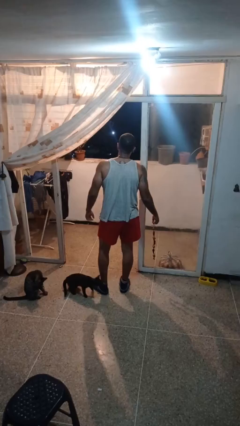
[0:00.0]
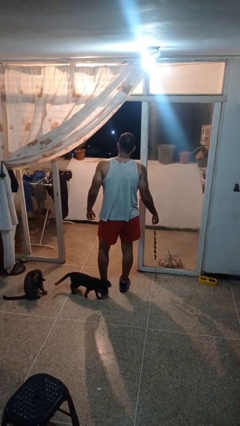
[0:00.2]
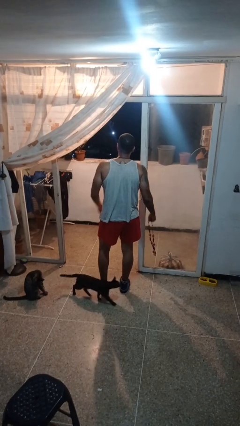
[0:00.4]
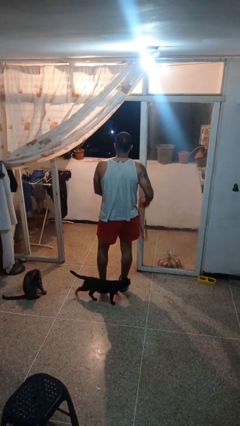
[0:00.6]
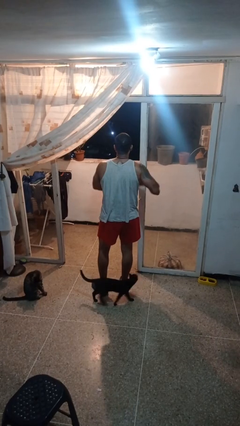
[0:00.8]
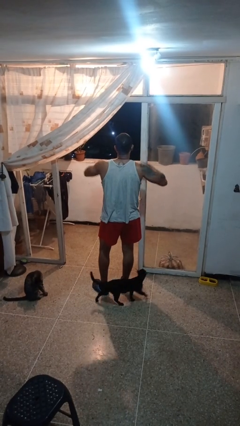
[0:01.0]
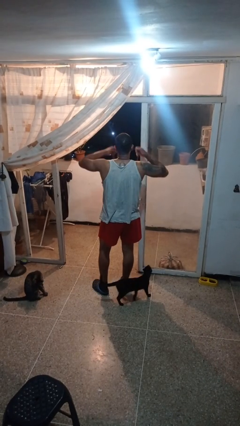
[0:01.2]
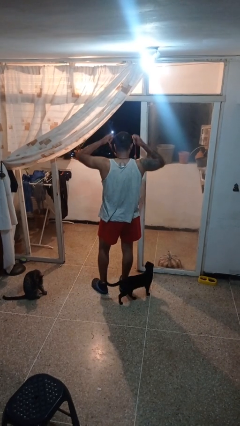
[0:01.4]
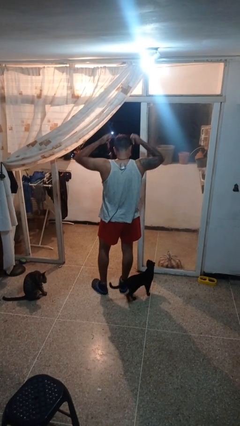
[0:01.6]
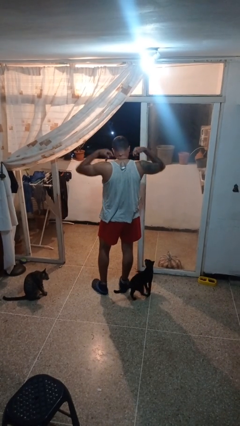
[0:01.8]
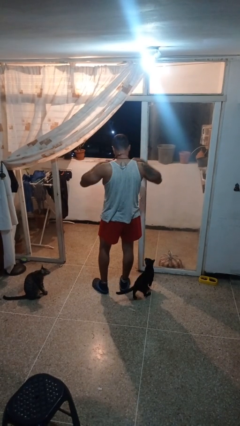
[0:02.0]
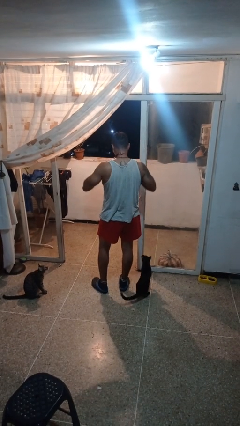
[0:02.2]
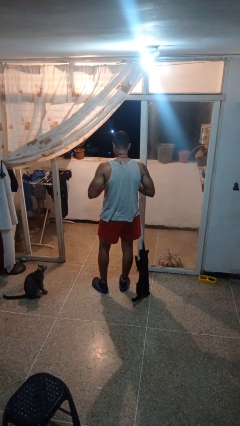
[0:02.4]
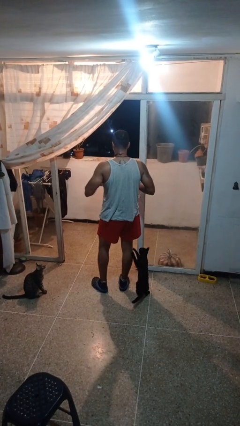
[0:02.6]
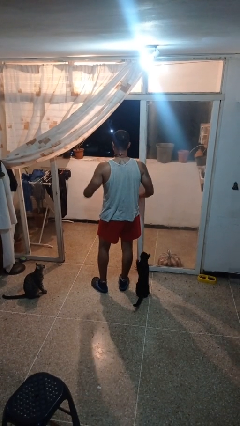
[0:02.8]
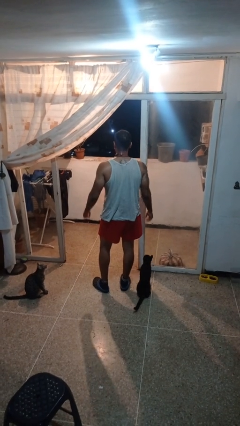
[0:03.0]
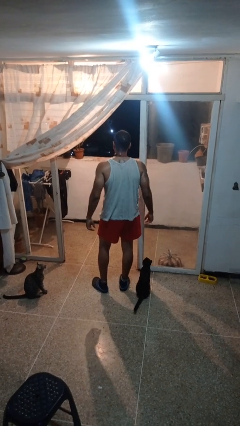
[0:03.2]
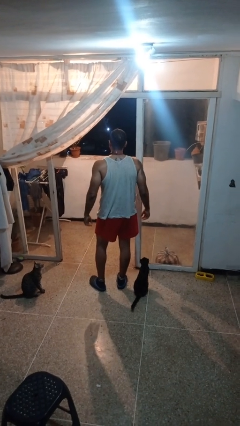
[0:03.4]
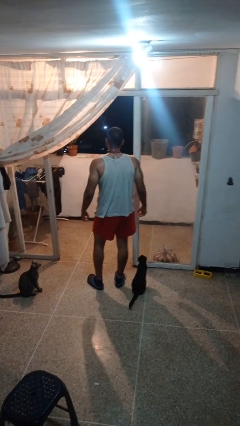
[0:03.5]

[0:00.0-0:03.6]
person puts on necklace

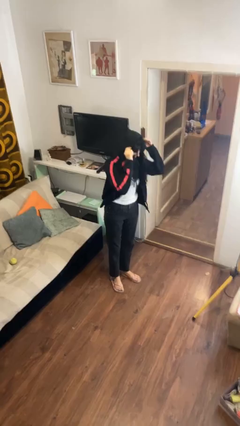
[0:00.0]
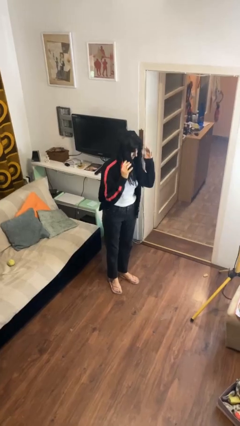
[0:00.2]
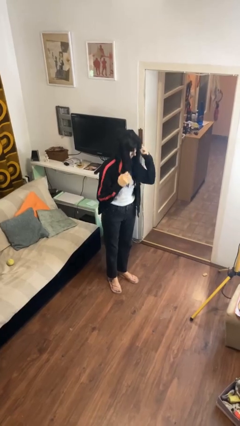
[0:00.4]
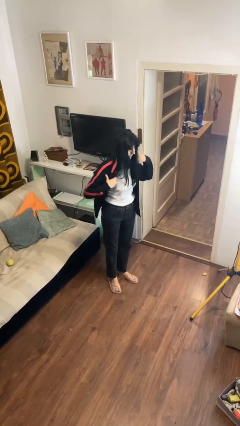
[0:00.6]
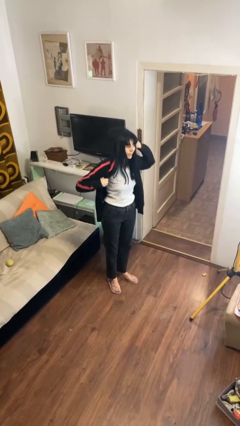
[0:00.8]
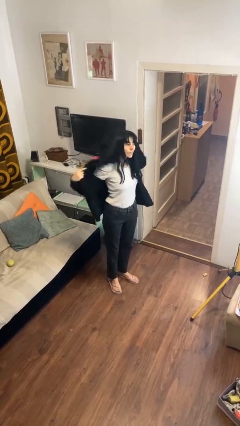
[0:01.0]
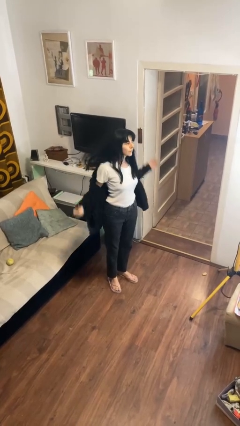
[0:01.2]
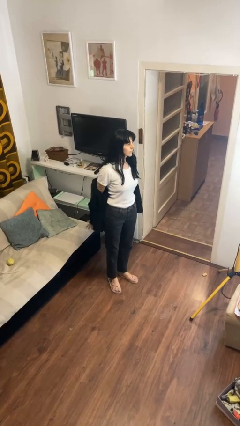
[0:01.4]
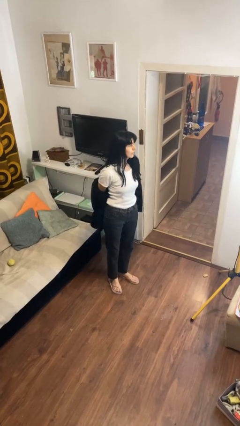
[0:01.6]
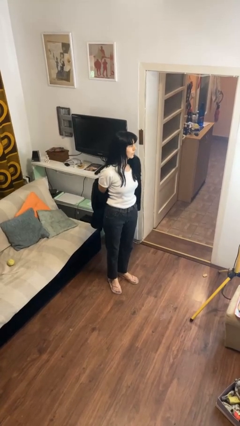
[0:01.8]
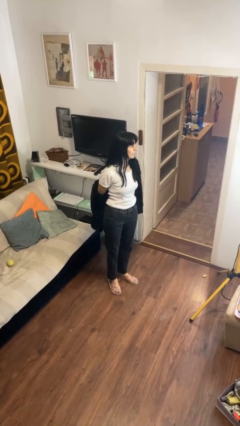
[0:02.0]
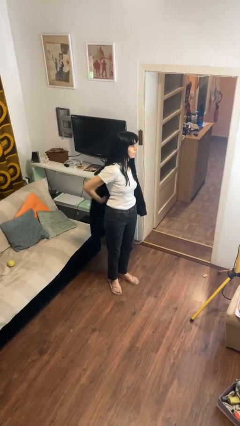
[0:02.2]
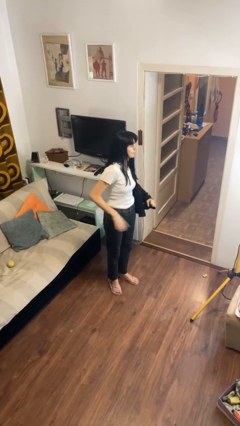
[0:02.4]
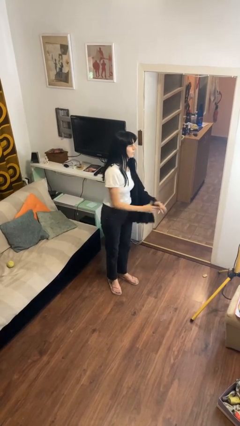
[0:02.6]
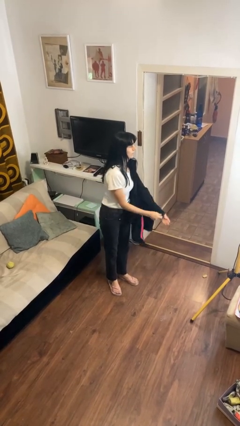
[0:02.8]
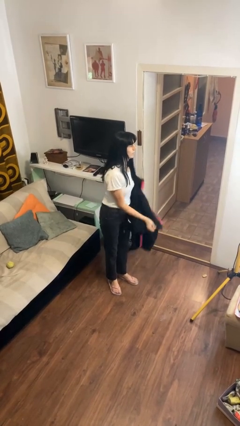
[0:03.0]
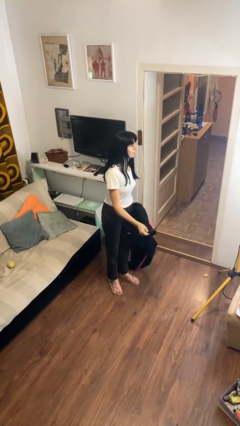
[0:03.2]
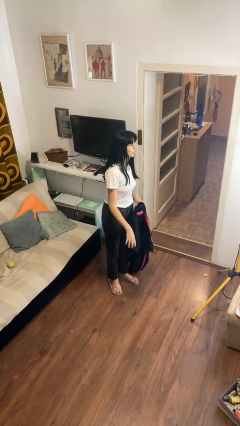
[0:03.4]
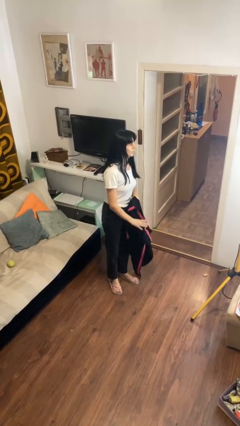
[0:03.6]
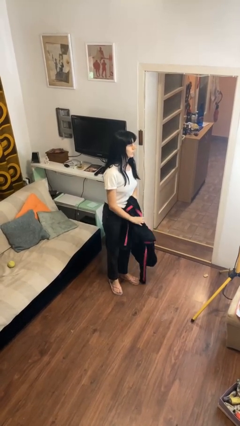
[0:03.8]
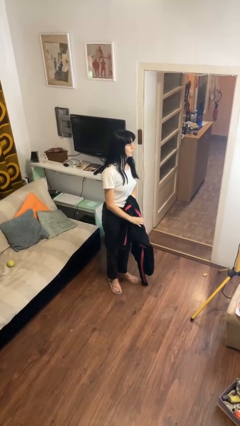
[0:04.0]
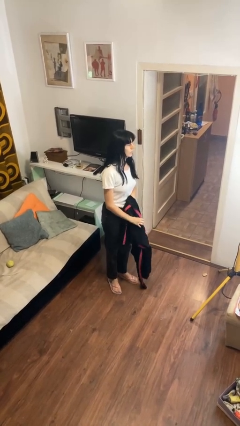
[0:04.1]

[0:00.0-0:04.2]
person takes off hoodie

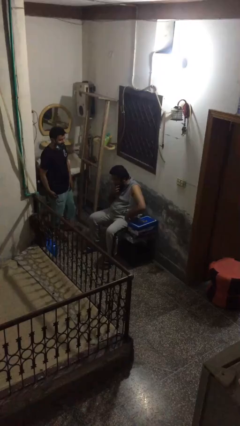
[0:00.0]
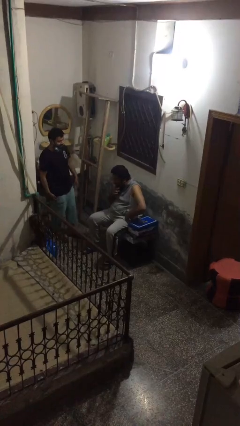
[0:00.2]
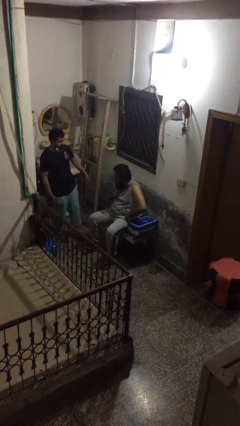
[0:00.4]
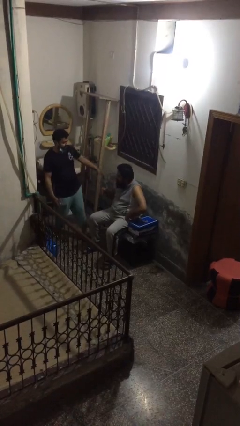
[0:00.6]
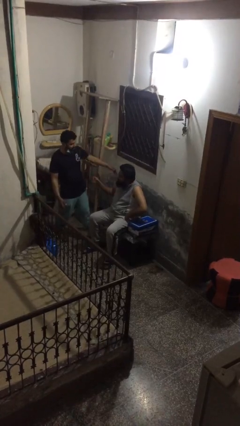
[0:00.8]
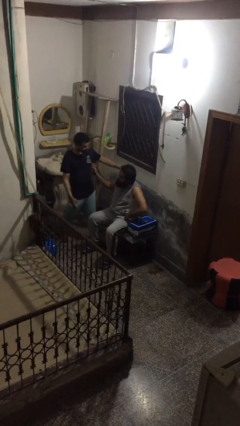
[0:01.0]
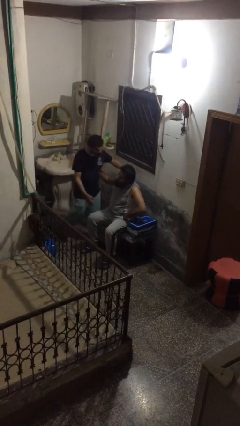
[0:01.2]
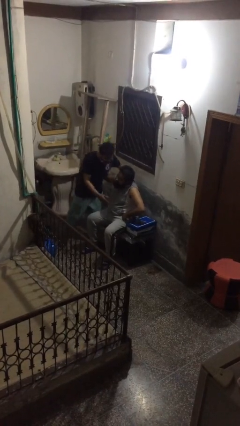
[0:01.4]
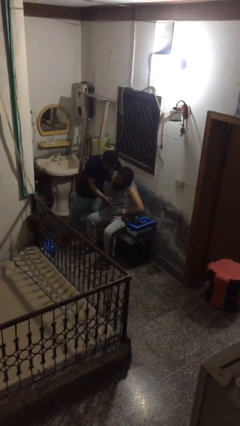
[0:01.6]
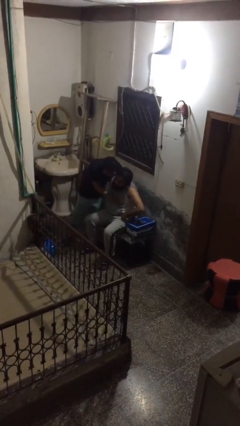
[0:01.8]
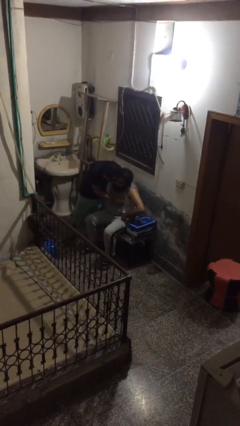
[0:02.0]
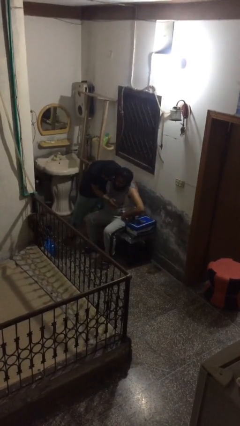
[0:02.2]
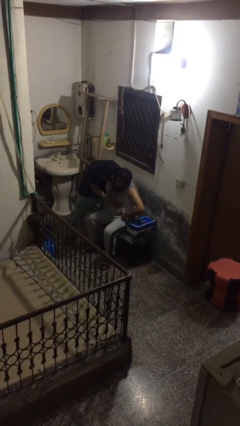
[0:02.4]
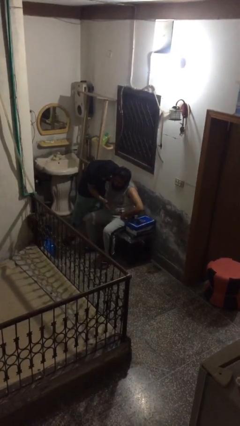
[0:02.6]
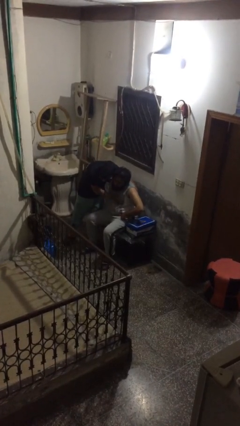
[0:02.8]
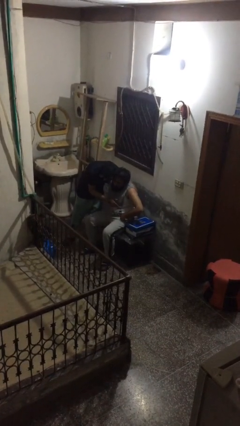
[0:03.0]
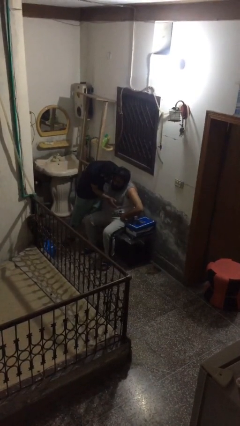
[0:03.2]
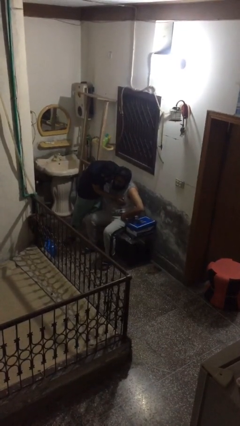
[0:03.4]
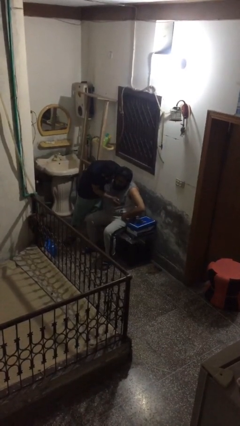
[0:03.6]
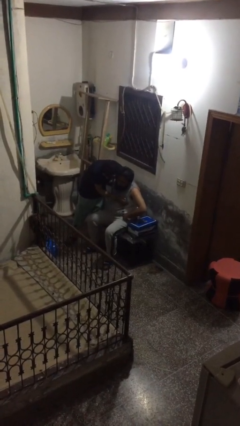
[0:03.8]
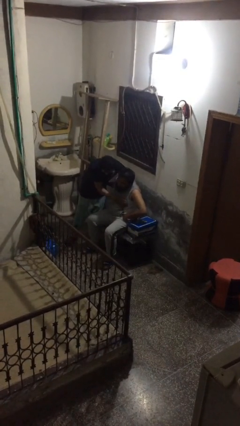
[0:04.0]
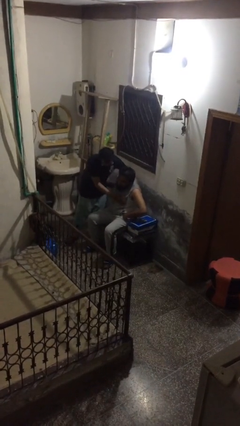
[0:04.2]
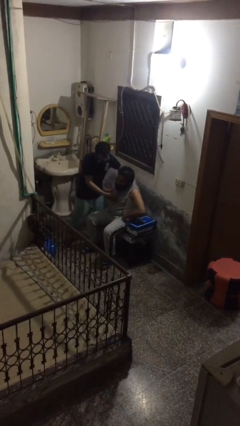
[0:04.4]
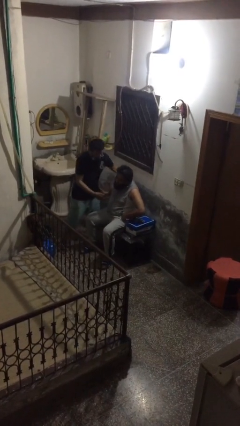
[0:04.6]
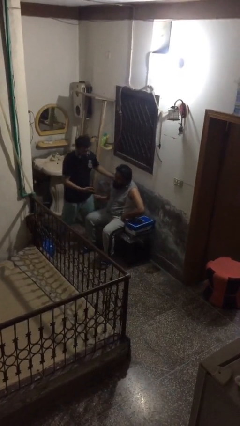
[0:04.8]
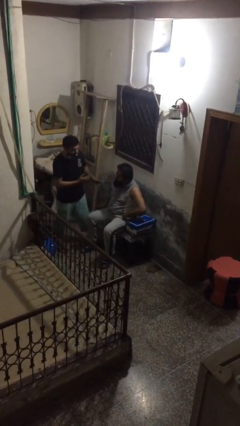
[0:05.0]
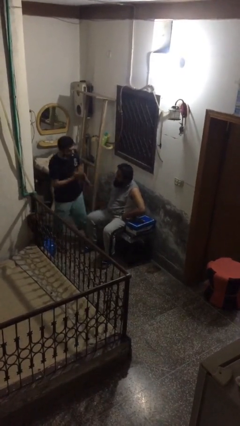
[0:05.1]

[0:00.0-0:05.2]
person embraces person

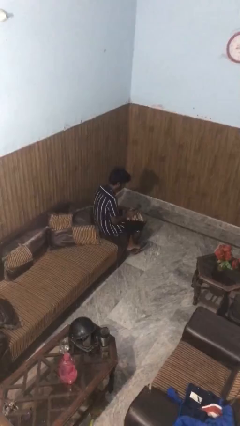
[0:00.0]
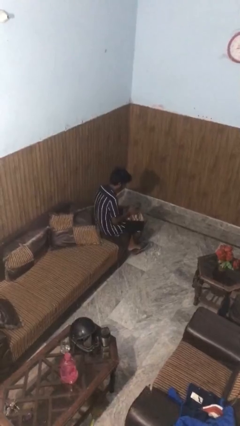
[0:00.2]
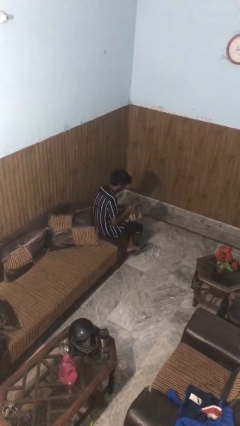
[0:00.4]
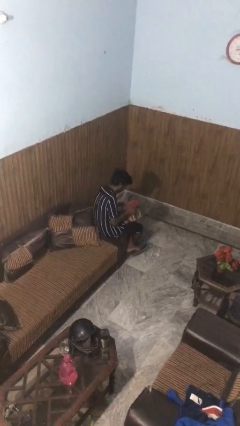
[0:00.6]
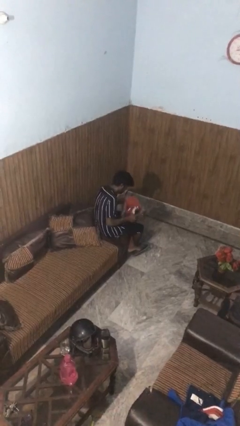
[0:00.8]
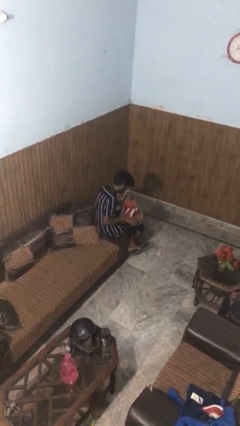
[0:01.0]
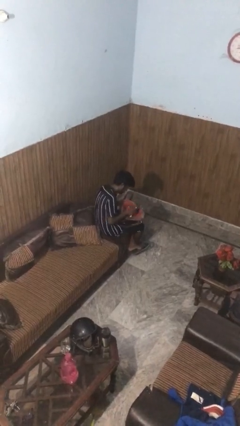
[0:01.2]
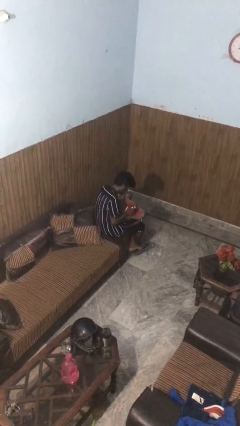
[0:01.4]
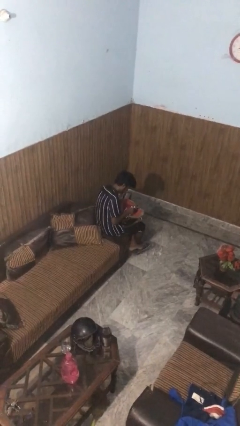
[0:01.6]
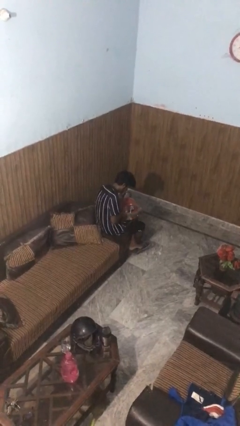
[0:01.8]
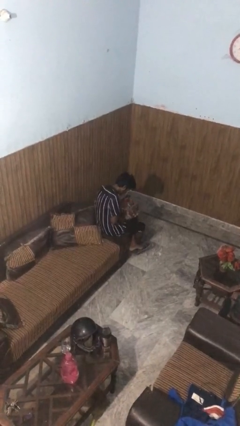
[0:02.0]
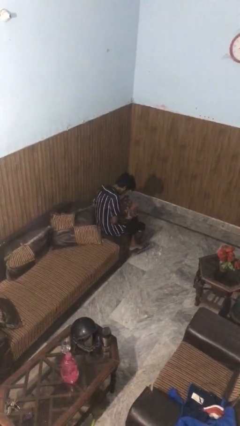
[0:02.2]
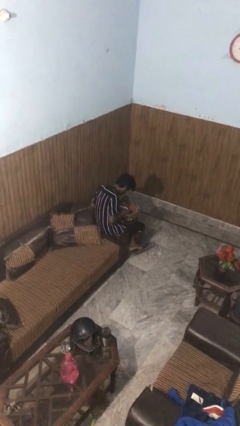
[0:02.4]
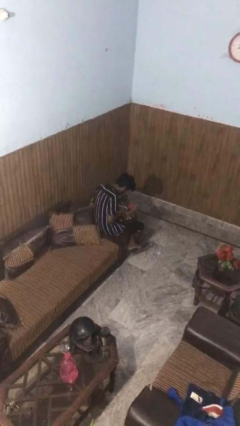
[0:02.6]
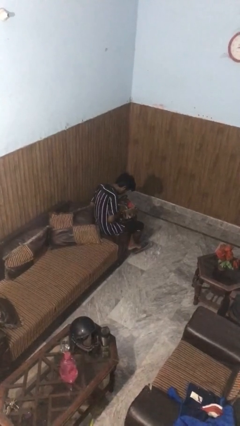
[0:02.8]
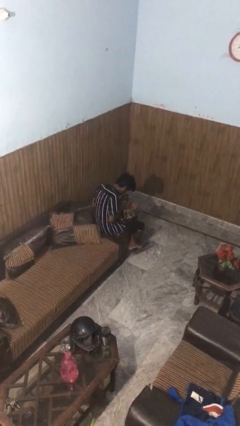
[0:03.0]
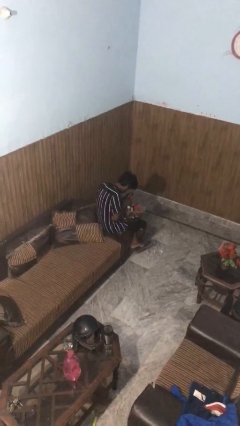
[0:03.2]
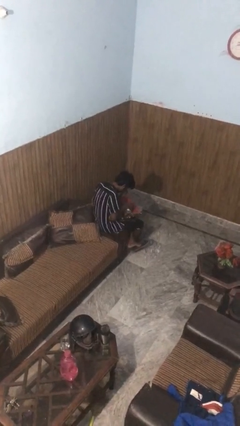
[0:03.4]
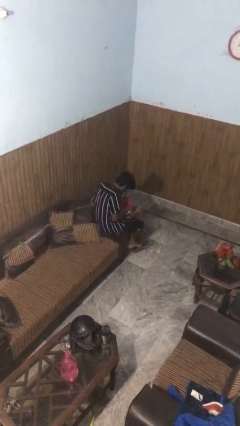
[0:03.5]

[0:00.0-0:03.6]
person searches in purse

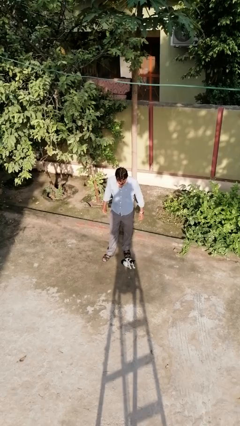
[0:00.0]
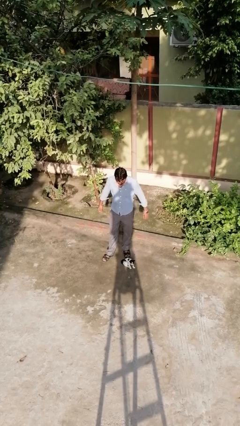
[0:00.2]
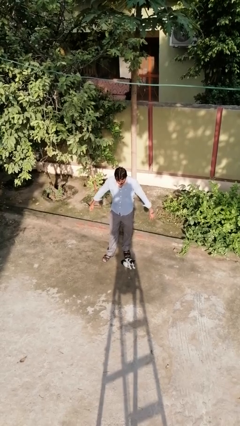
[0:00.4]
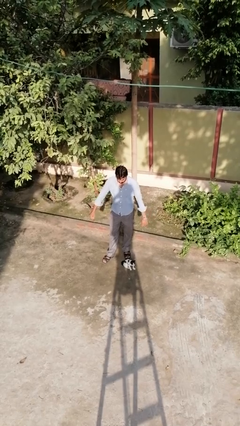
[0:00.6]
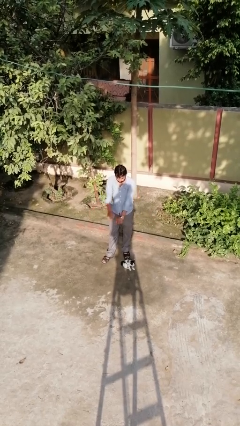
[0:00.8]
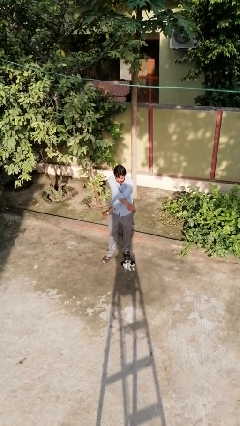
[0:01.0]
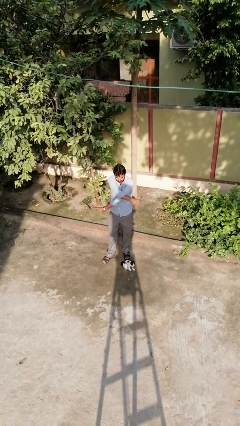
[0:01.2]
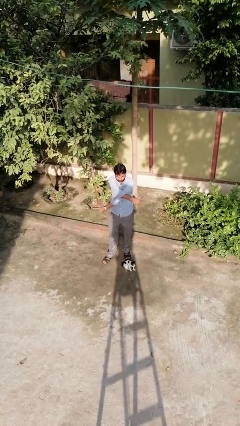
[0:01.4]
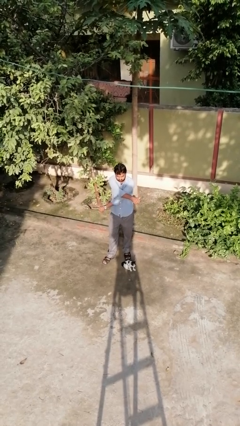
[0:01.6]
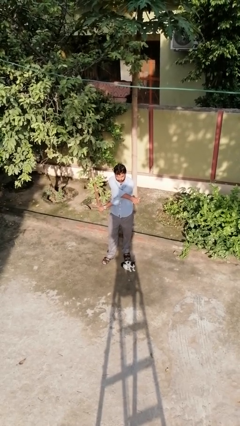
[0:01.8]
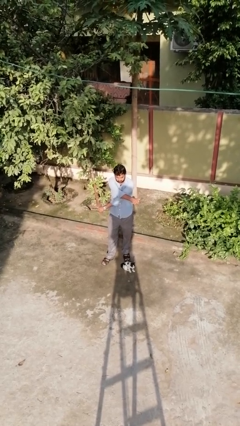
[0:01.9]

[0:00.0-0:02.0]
person crosses arms
